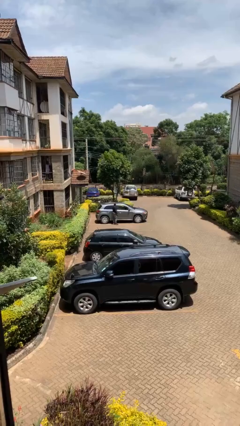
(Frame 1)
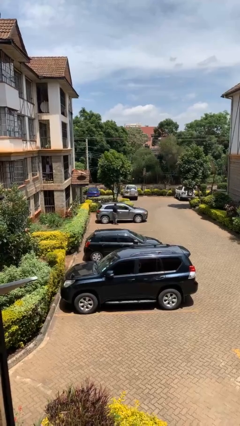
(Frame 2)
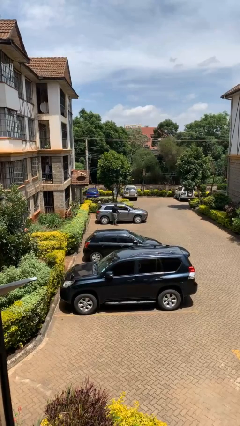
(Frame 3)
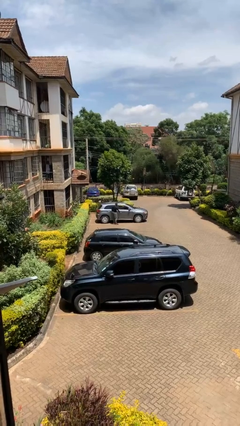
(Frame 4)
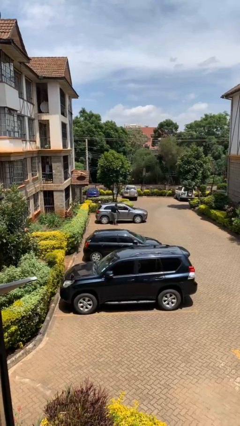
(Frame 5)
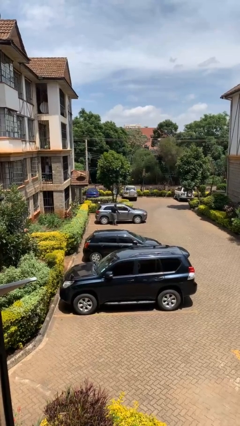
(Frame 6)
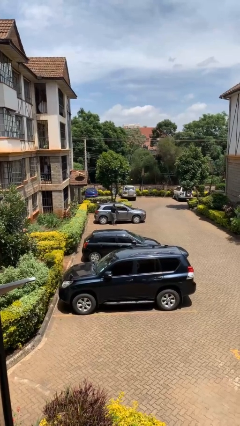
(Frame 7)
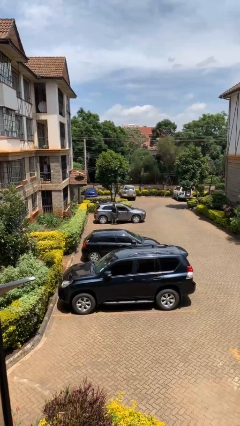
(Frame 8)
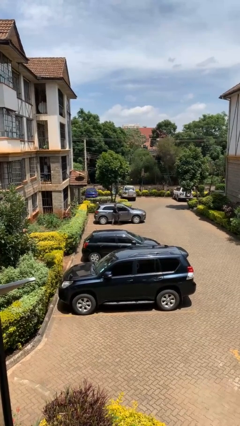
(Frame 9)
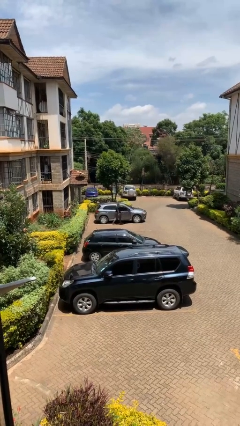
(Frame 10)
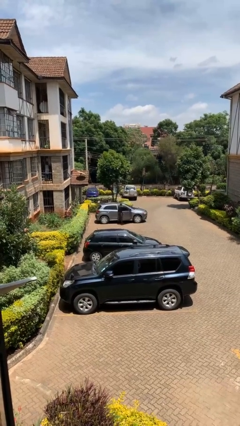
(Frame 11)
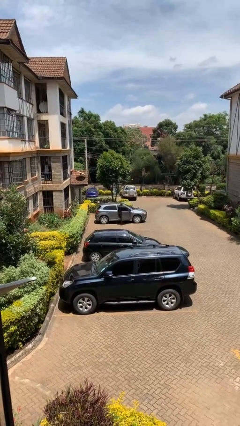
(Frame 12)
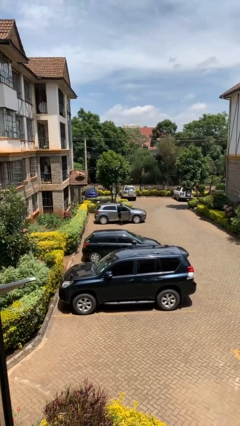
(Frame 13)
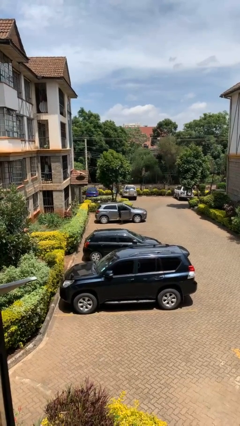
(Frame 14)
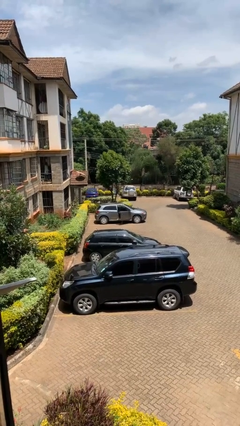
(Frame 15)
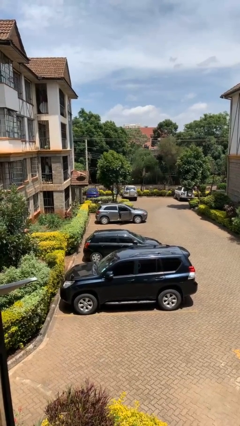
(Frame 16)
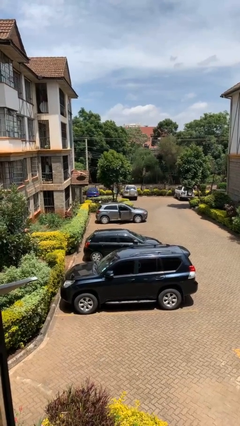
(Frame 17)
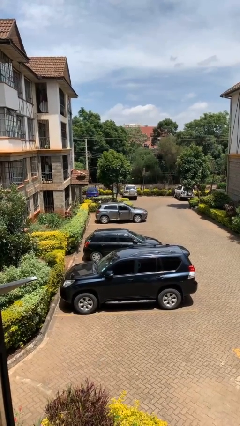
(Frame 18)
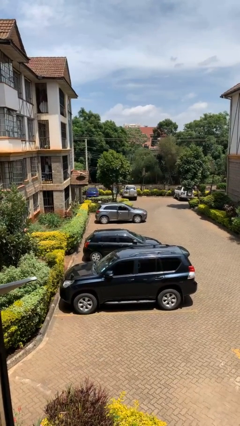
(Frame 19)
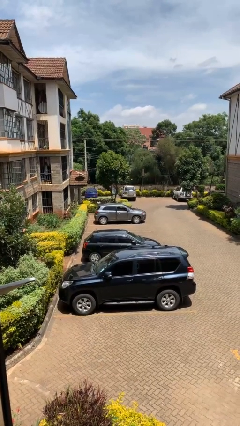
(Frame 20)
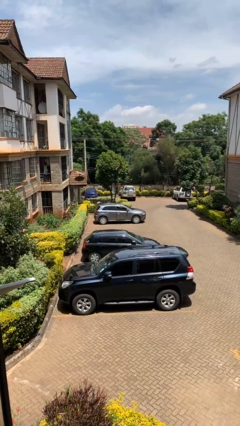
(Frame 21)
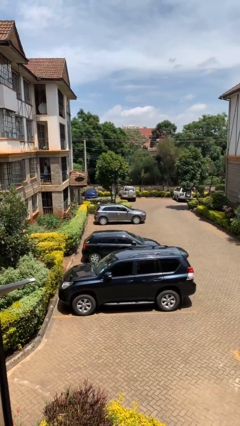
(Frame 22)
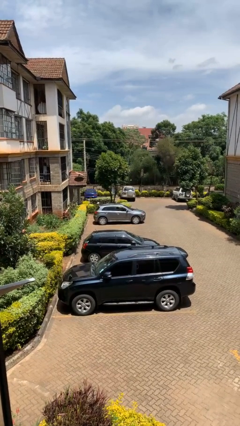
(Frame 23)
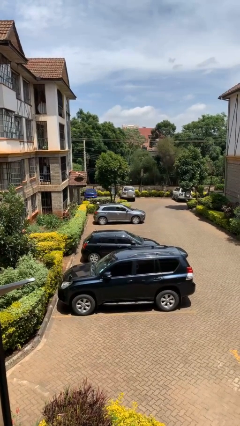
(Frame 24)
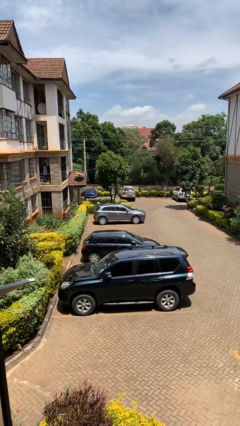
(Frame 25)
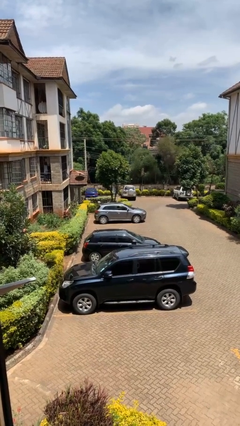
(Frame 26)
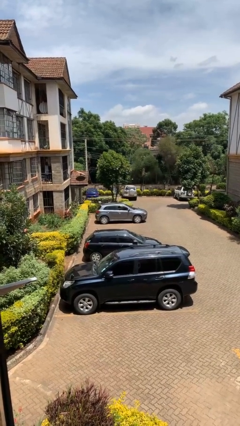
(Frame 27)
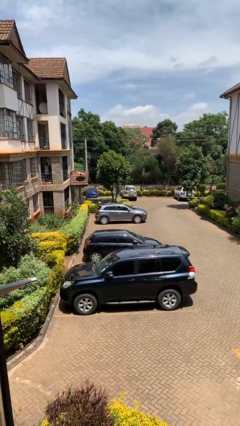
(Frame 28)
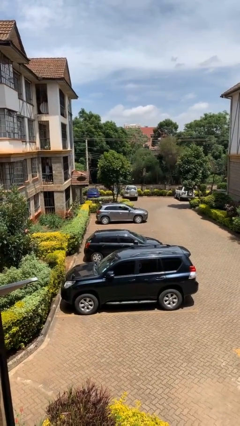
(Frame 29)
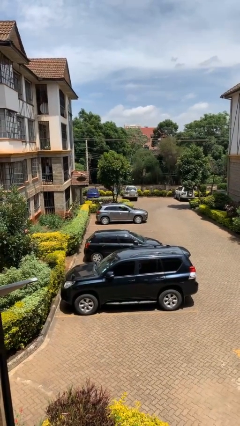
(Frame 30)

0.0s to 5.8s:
car picks up person

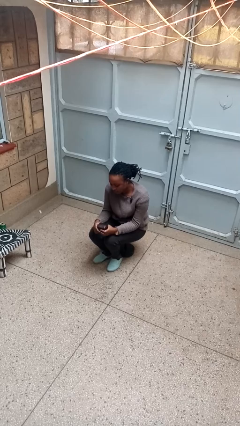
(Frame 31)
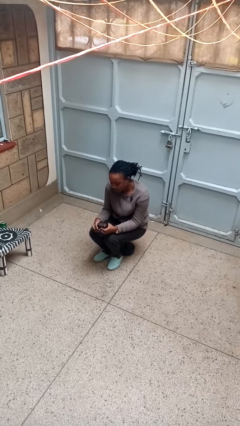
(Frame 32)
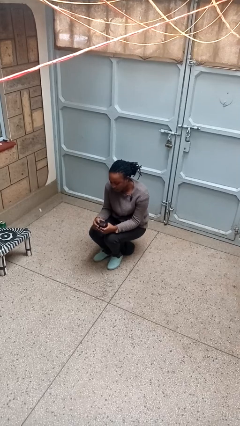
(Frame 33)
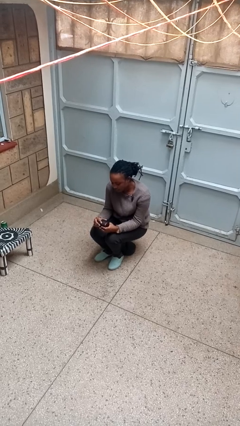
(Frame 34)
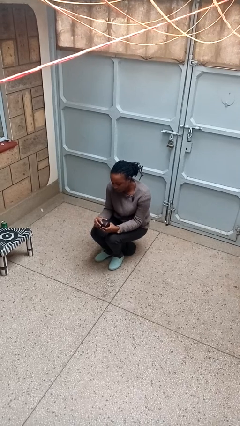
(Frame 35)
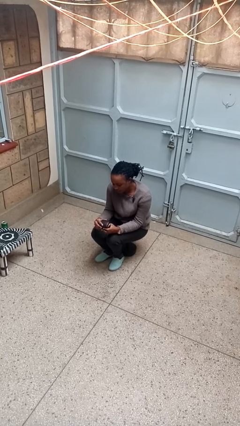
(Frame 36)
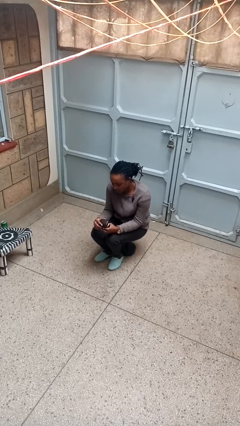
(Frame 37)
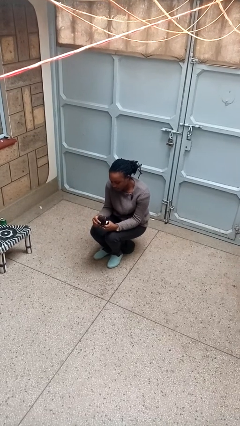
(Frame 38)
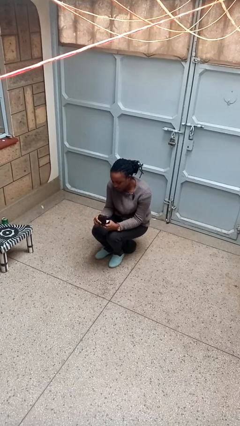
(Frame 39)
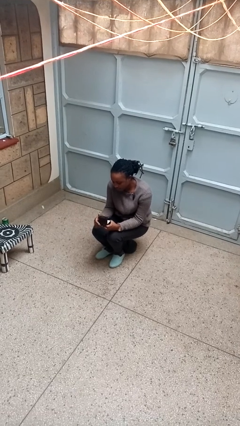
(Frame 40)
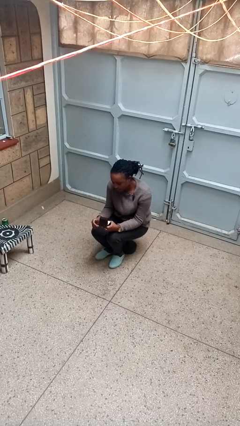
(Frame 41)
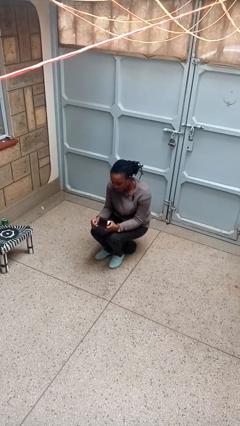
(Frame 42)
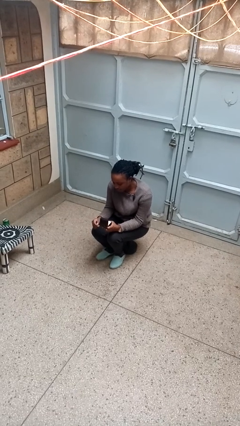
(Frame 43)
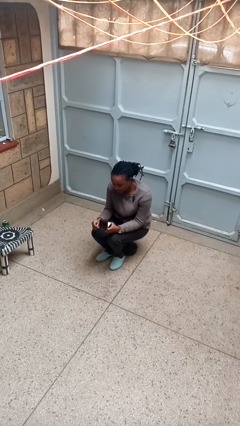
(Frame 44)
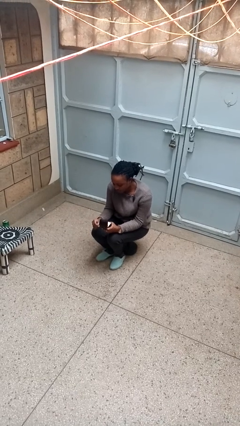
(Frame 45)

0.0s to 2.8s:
person opens jewelry box

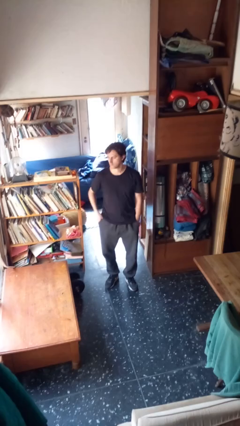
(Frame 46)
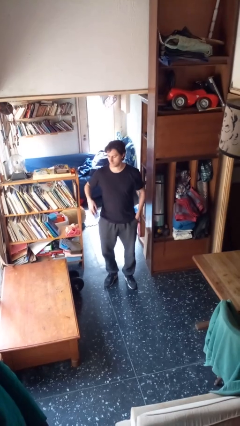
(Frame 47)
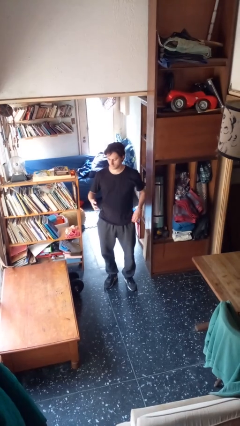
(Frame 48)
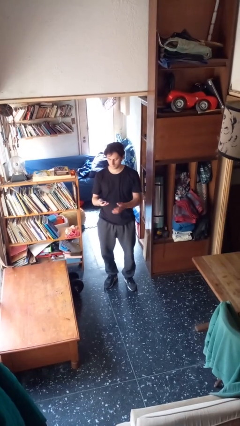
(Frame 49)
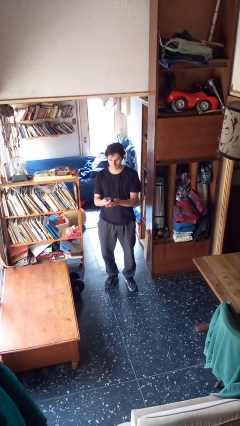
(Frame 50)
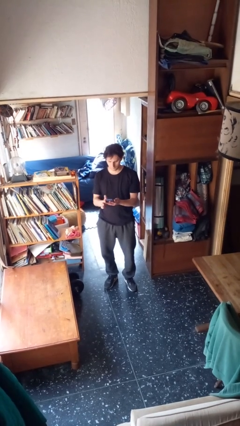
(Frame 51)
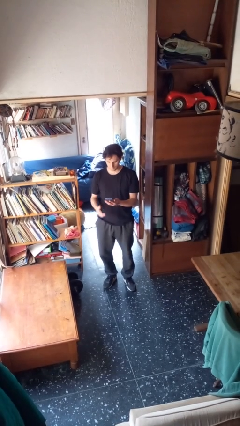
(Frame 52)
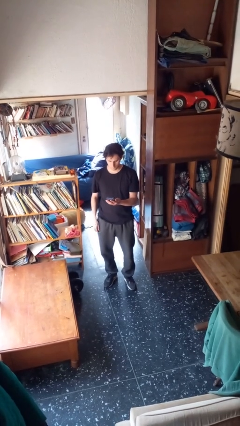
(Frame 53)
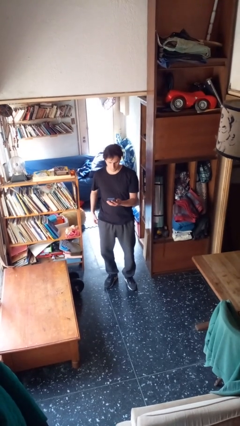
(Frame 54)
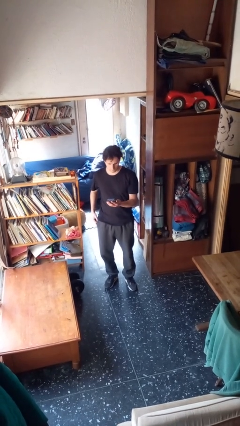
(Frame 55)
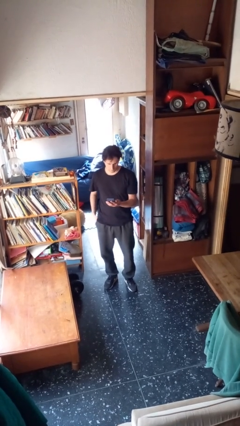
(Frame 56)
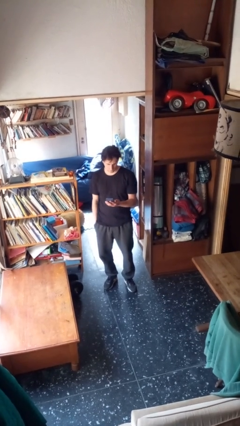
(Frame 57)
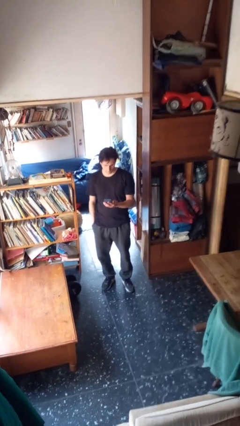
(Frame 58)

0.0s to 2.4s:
person takes phone from pocket

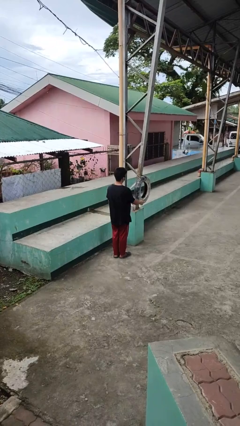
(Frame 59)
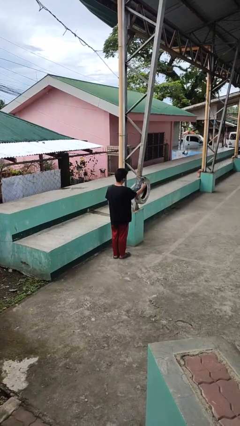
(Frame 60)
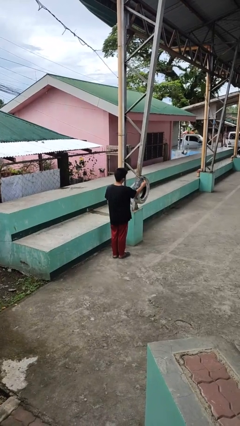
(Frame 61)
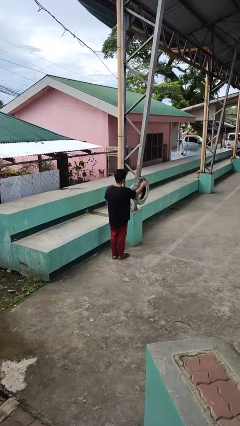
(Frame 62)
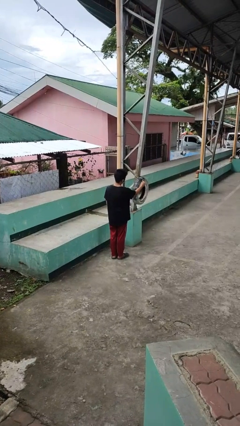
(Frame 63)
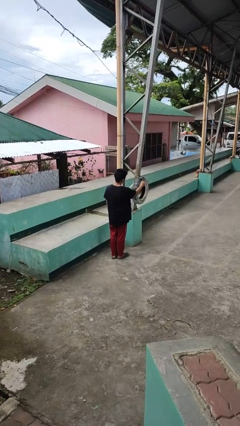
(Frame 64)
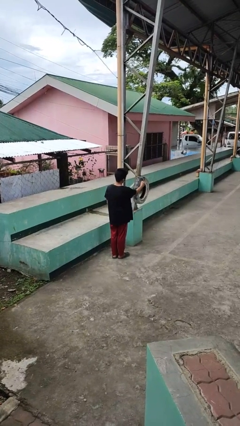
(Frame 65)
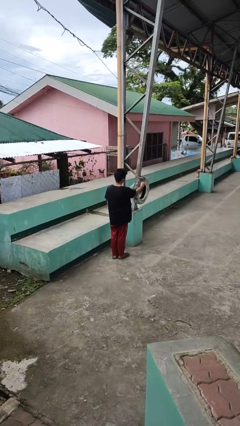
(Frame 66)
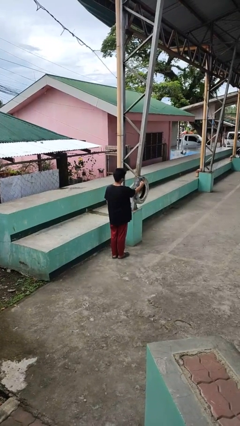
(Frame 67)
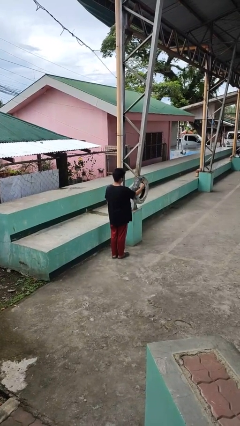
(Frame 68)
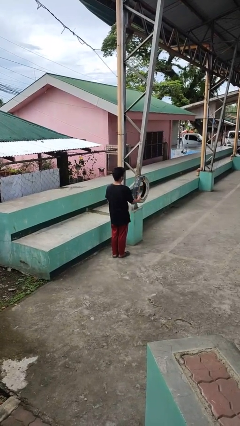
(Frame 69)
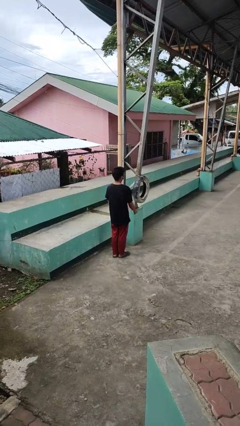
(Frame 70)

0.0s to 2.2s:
person taps object with finger

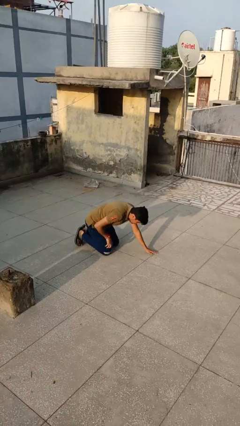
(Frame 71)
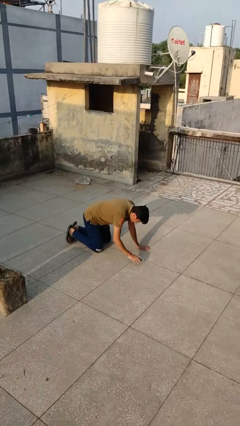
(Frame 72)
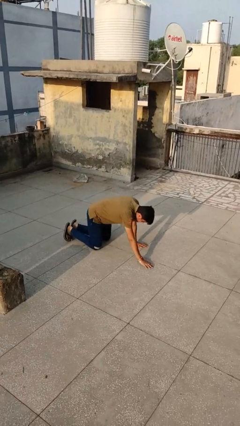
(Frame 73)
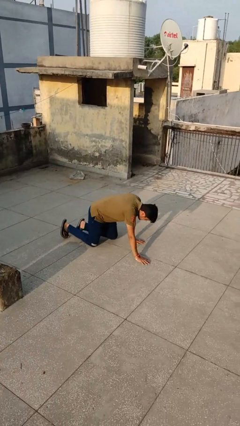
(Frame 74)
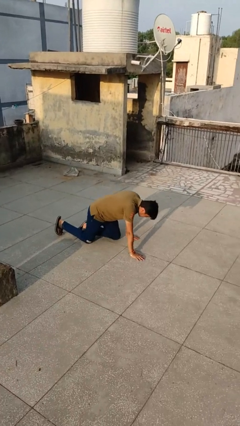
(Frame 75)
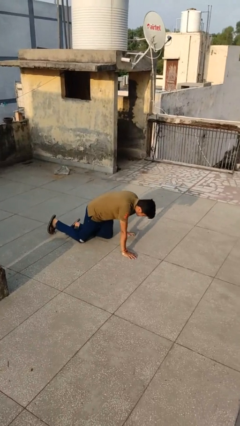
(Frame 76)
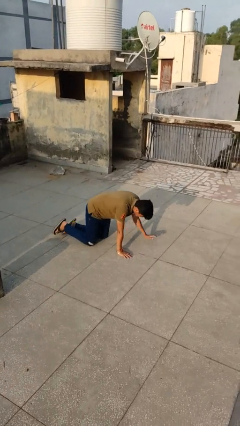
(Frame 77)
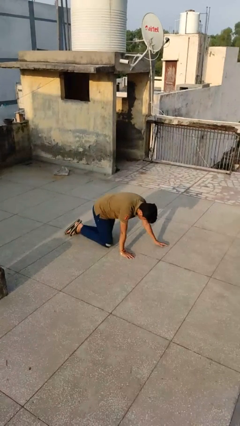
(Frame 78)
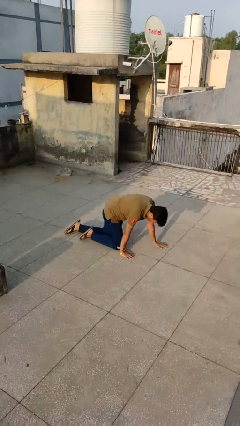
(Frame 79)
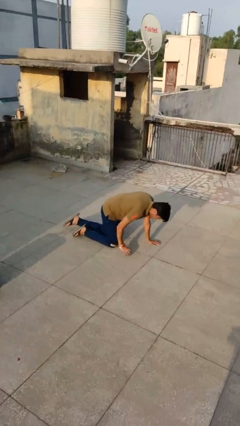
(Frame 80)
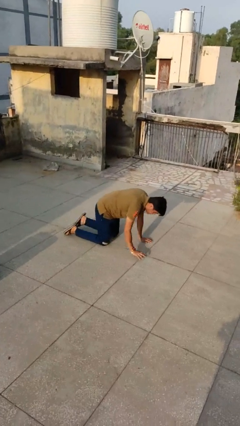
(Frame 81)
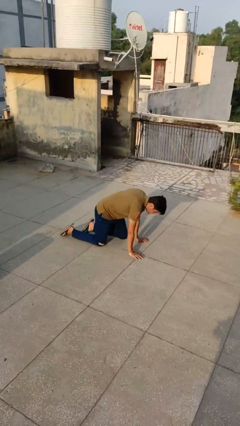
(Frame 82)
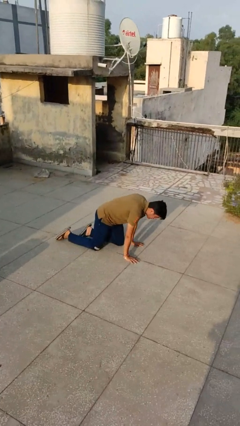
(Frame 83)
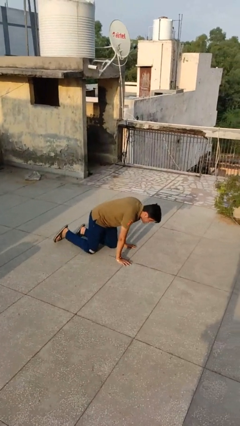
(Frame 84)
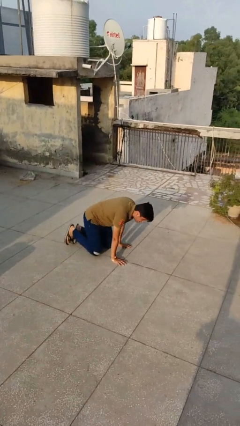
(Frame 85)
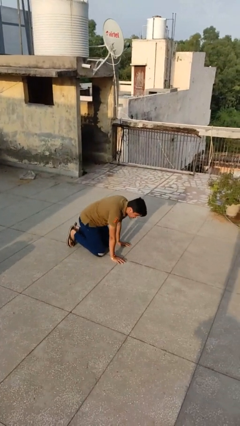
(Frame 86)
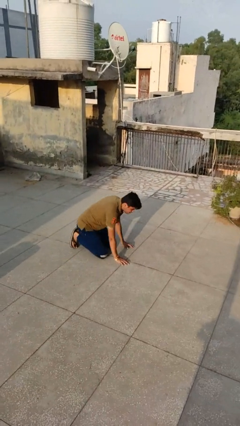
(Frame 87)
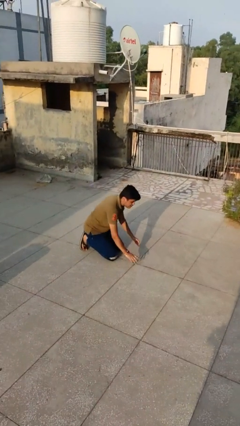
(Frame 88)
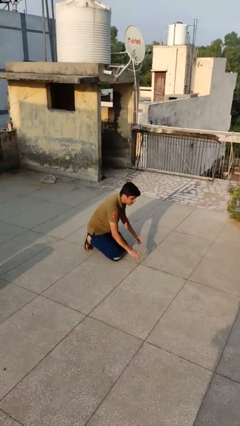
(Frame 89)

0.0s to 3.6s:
person crawls

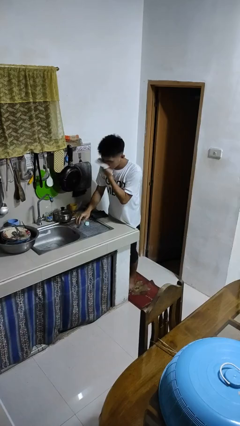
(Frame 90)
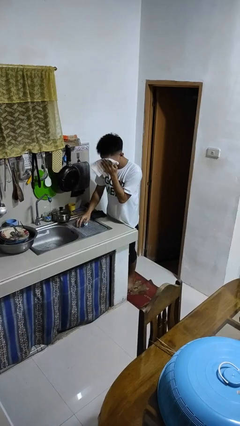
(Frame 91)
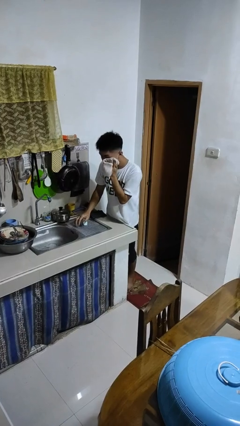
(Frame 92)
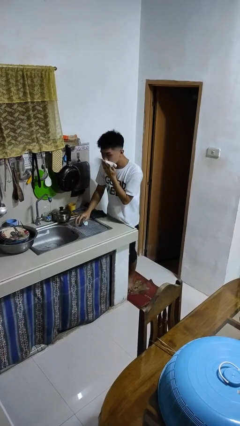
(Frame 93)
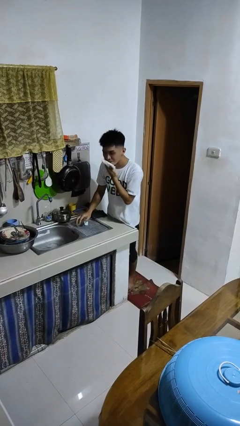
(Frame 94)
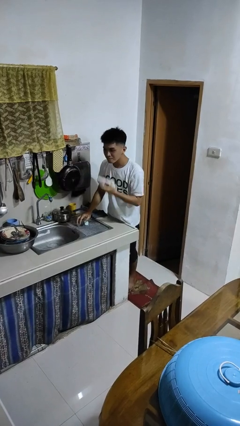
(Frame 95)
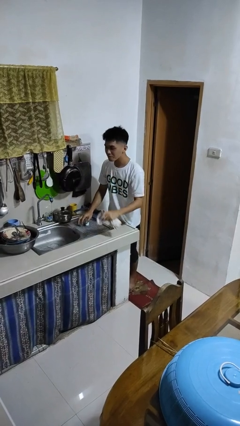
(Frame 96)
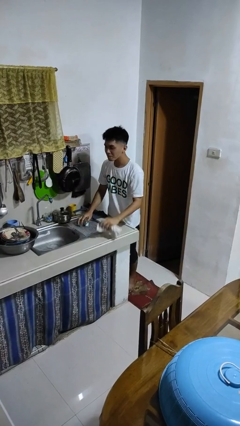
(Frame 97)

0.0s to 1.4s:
person dries face with towel
